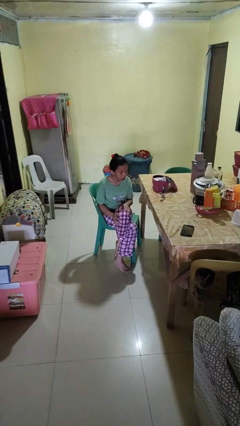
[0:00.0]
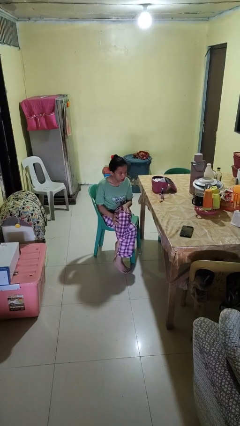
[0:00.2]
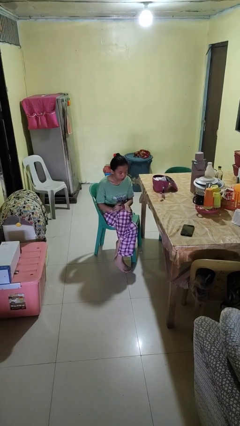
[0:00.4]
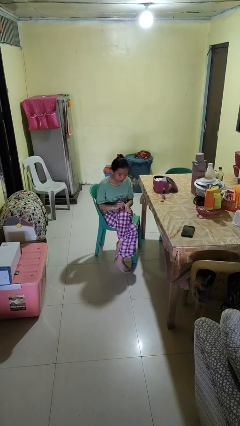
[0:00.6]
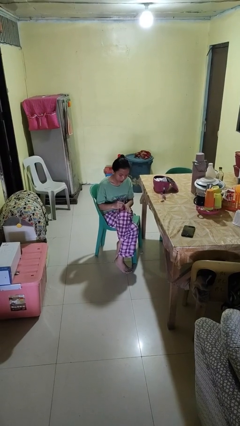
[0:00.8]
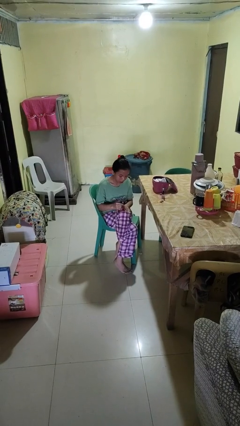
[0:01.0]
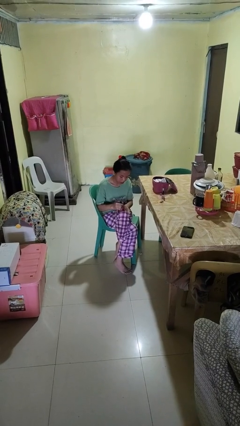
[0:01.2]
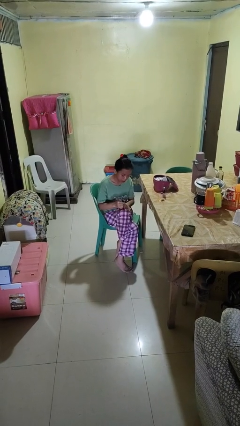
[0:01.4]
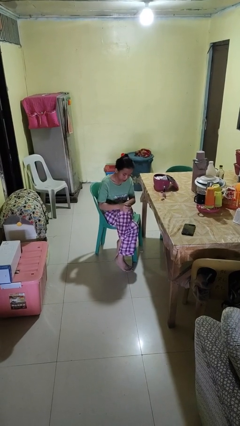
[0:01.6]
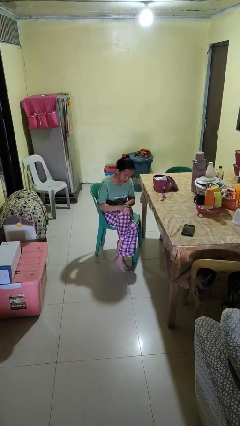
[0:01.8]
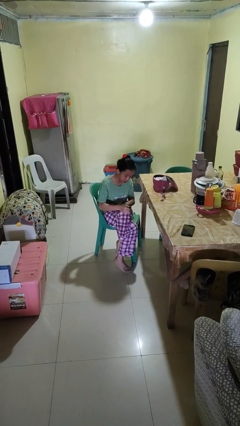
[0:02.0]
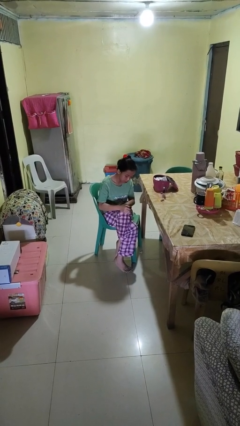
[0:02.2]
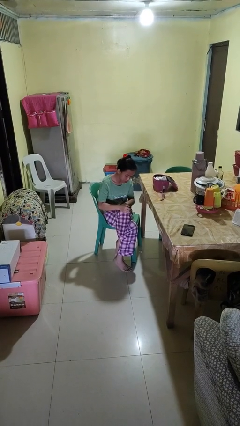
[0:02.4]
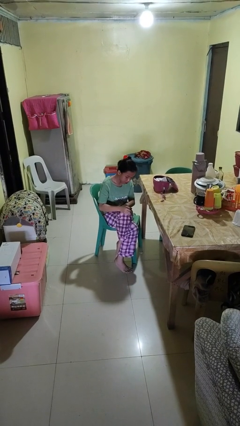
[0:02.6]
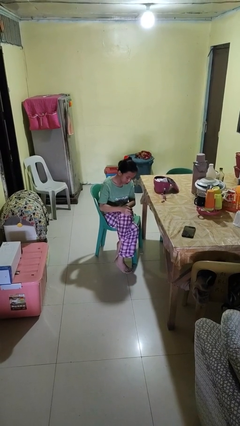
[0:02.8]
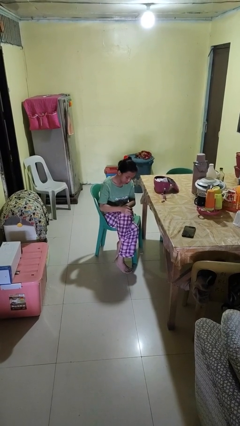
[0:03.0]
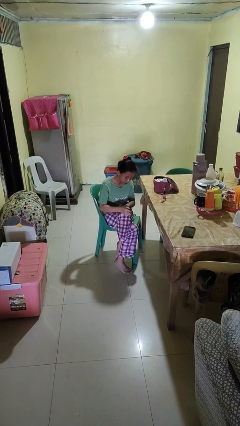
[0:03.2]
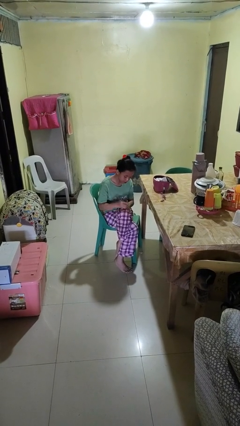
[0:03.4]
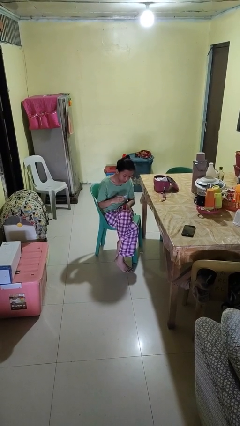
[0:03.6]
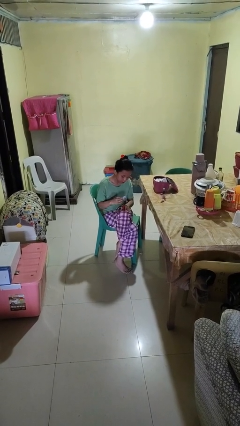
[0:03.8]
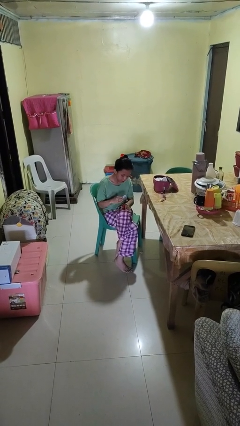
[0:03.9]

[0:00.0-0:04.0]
person paints fingernails

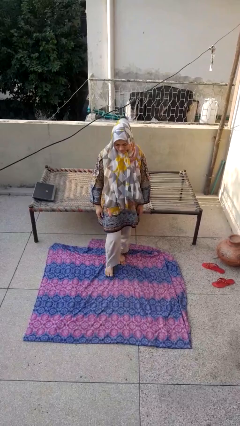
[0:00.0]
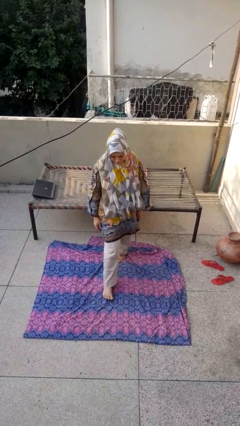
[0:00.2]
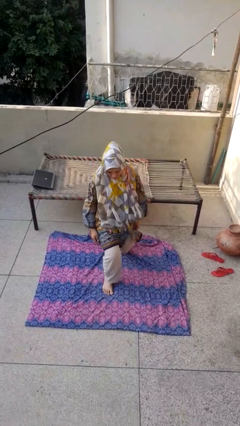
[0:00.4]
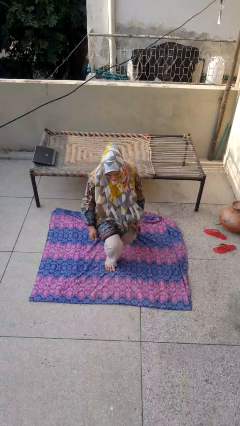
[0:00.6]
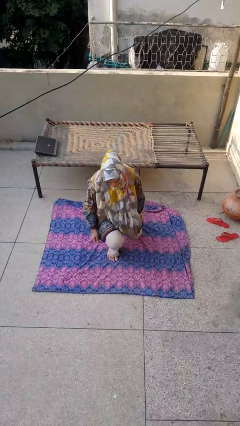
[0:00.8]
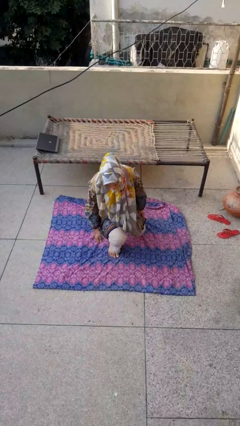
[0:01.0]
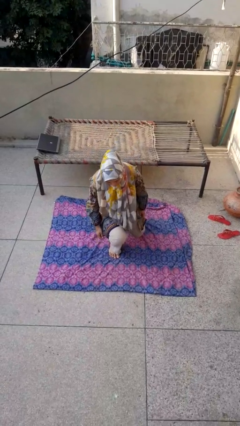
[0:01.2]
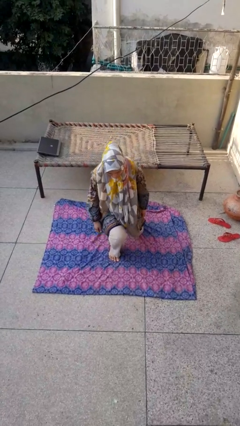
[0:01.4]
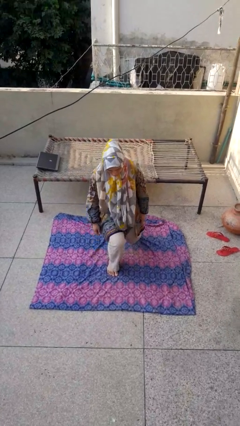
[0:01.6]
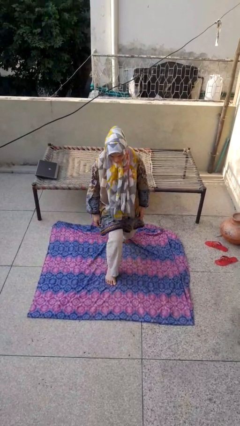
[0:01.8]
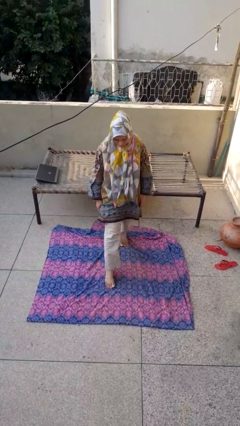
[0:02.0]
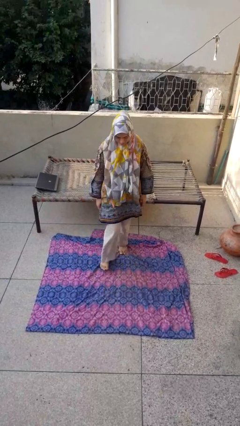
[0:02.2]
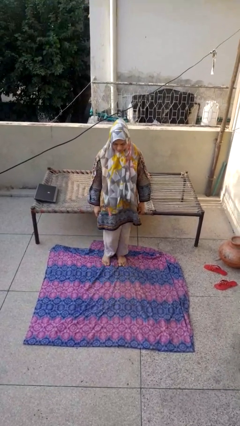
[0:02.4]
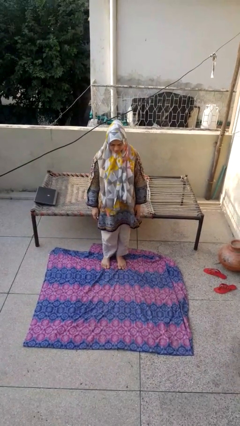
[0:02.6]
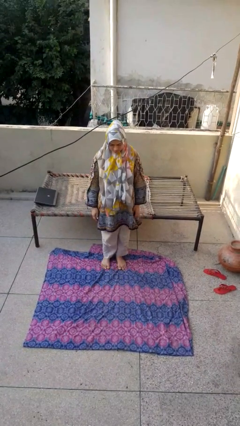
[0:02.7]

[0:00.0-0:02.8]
person exercises with lunges

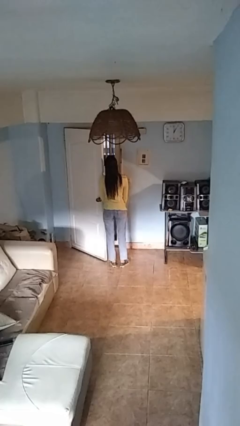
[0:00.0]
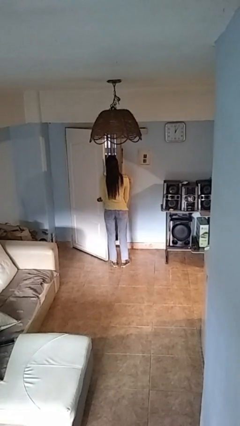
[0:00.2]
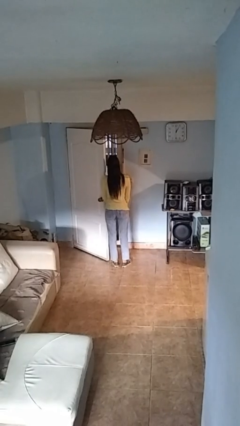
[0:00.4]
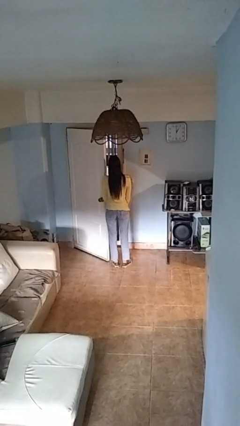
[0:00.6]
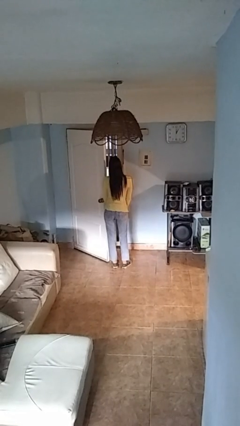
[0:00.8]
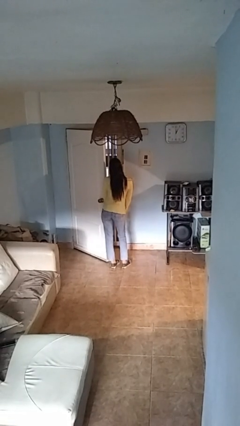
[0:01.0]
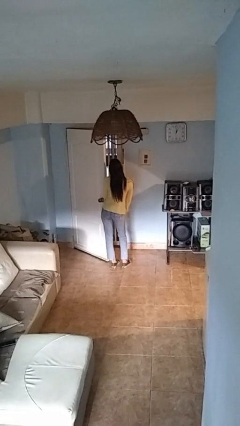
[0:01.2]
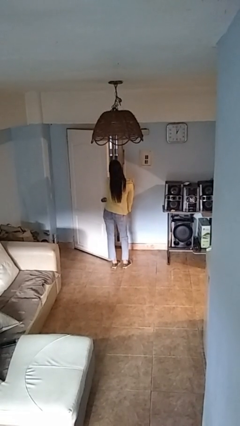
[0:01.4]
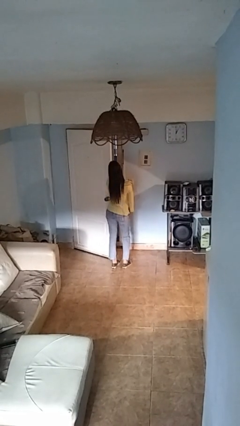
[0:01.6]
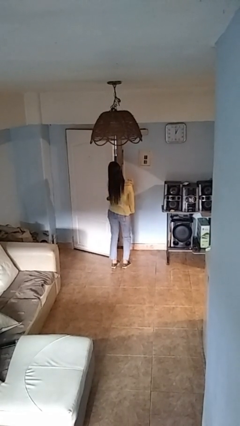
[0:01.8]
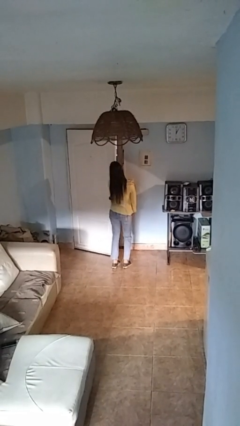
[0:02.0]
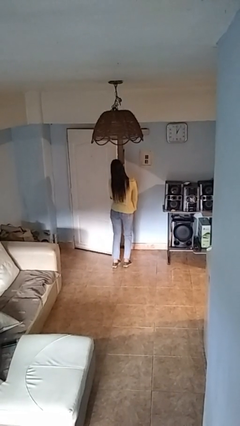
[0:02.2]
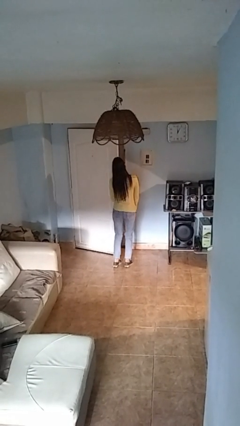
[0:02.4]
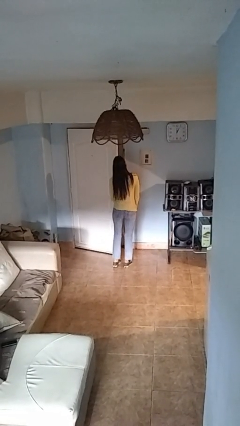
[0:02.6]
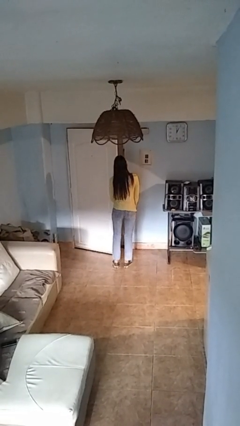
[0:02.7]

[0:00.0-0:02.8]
person closes door with hip

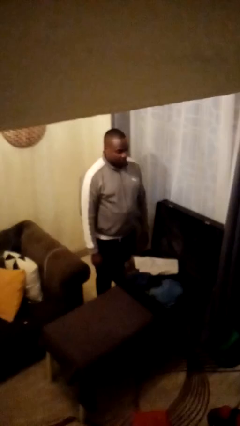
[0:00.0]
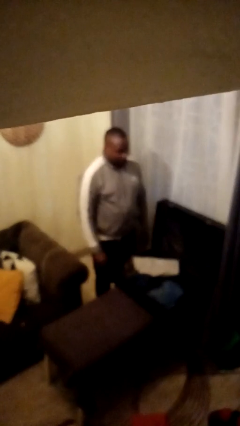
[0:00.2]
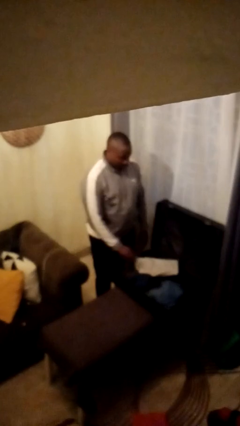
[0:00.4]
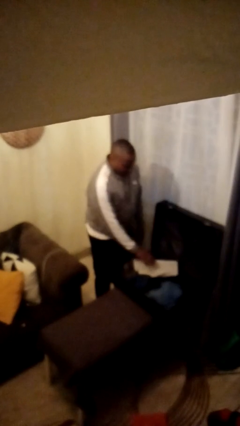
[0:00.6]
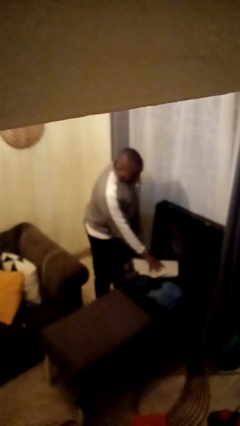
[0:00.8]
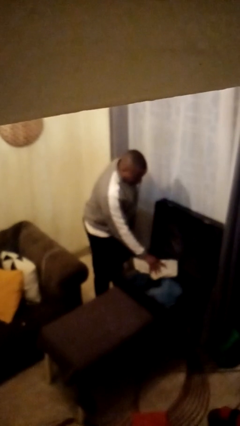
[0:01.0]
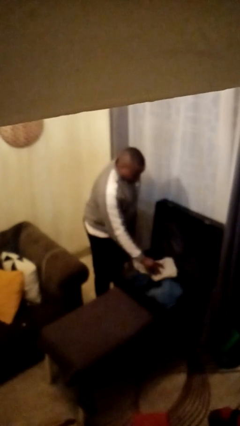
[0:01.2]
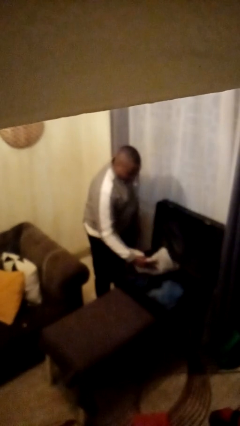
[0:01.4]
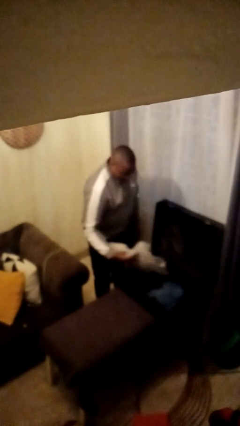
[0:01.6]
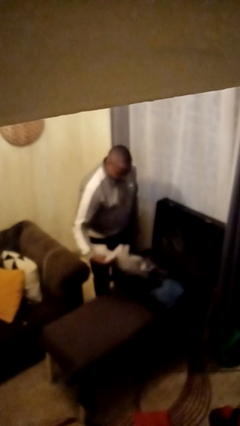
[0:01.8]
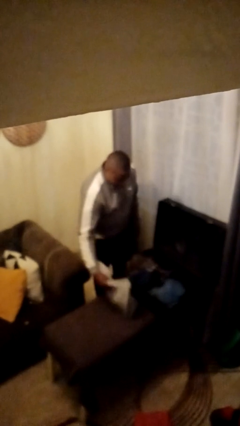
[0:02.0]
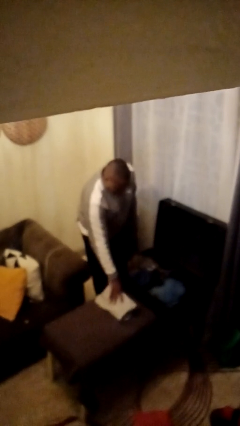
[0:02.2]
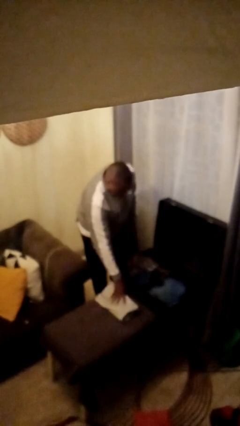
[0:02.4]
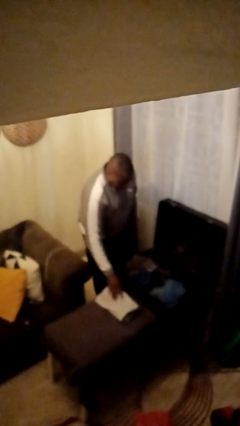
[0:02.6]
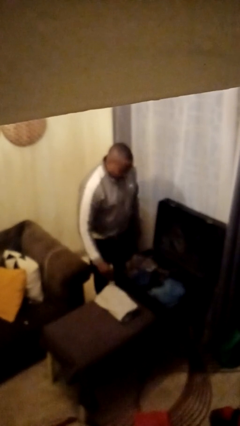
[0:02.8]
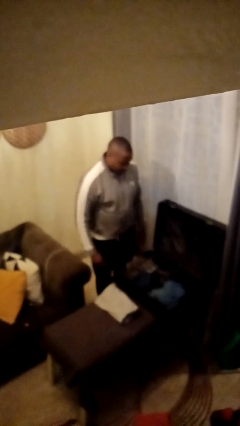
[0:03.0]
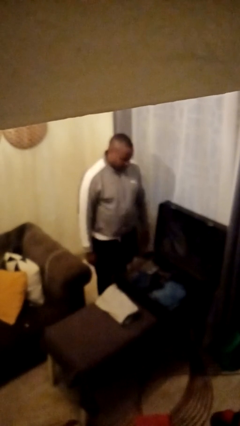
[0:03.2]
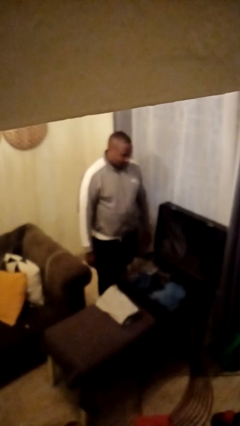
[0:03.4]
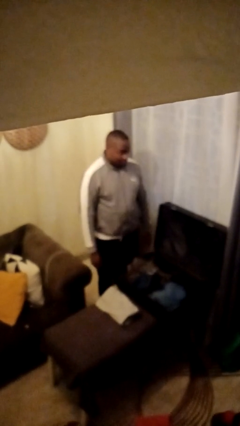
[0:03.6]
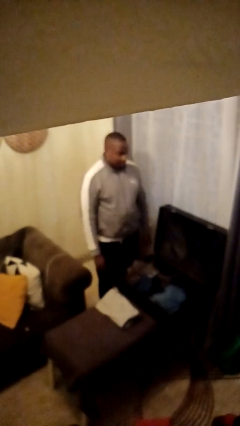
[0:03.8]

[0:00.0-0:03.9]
person unloads clothes from suitcase

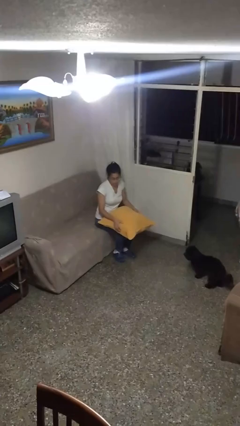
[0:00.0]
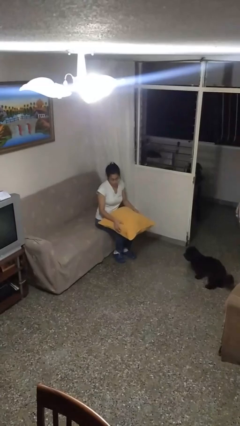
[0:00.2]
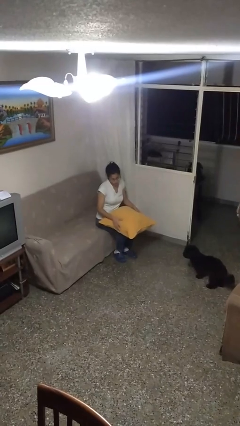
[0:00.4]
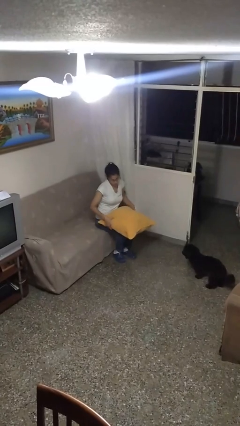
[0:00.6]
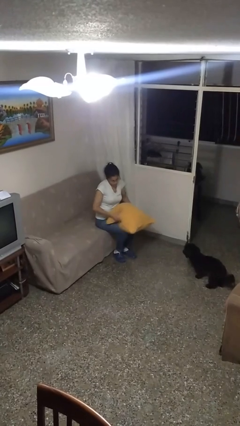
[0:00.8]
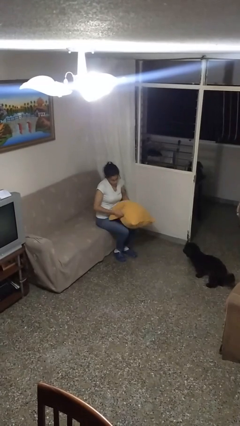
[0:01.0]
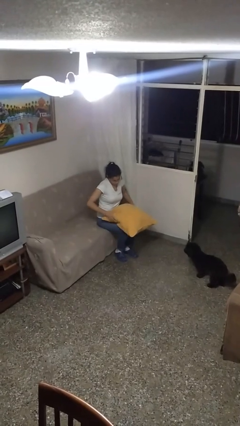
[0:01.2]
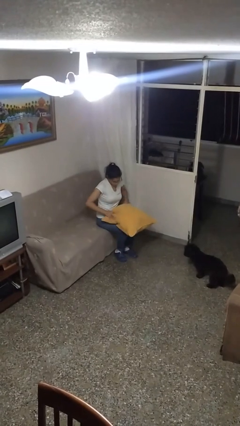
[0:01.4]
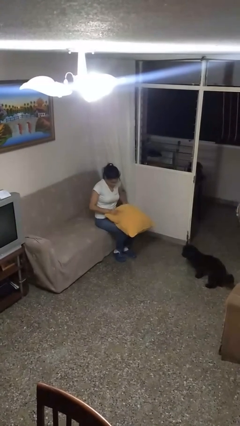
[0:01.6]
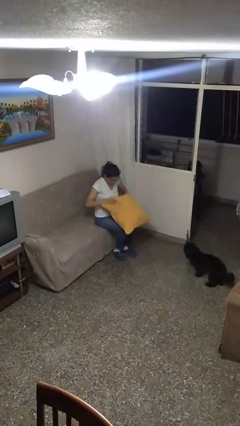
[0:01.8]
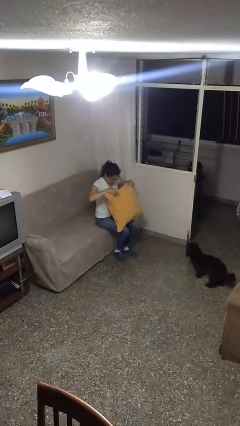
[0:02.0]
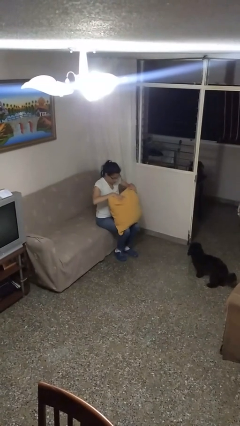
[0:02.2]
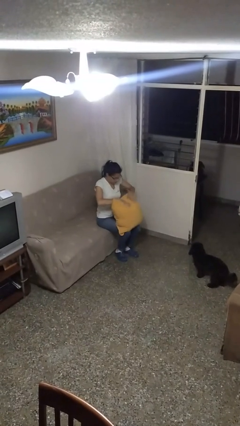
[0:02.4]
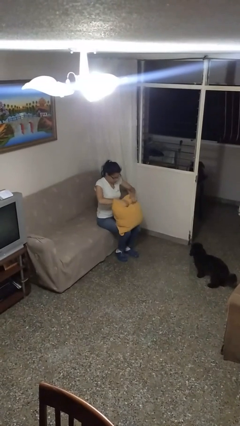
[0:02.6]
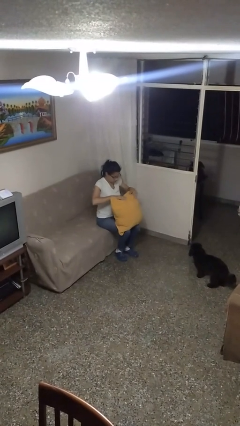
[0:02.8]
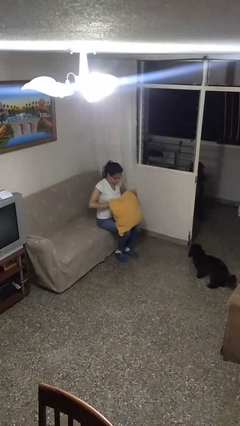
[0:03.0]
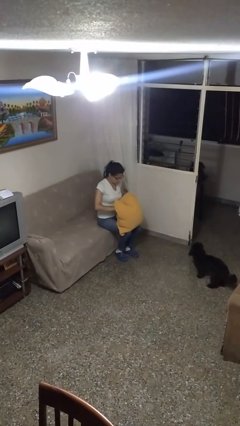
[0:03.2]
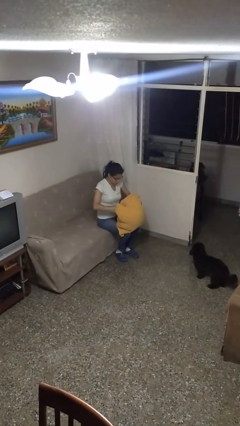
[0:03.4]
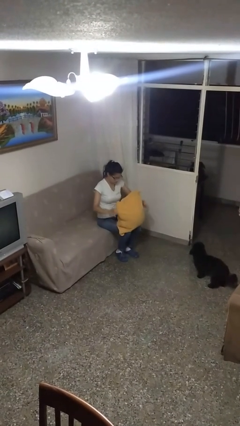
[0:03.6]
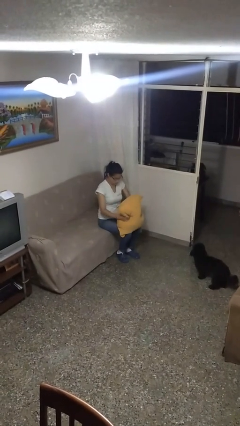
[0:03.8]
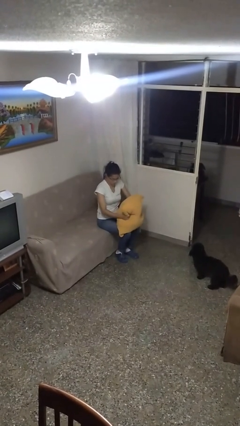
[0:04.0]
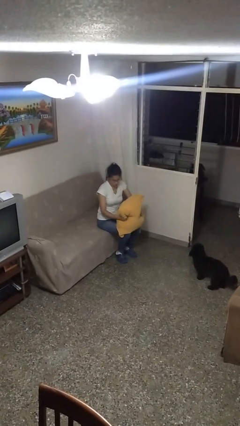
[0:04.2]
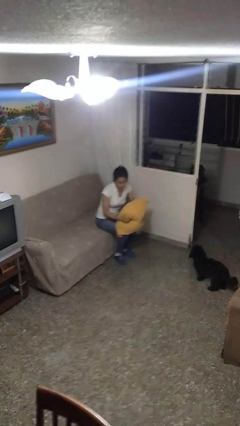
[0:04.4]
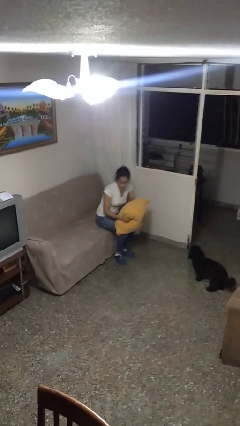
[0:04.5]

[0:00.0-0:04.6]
person squeezes object
